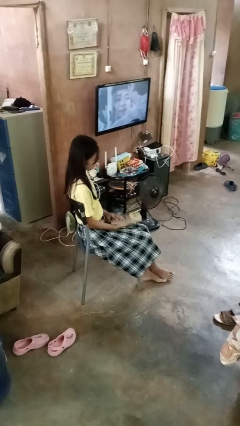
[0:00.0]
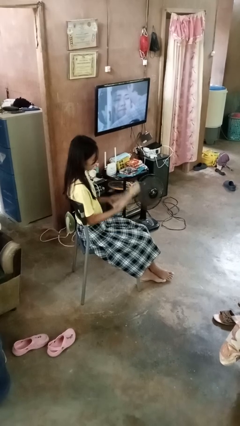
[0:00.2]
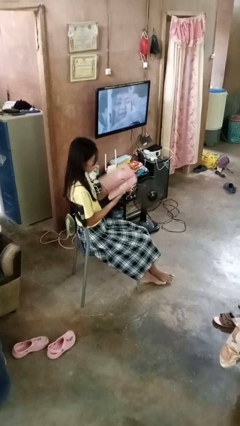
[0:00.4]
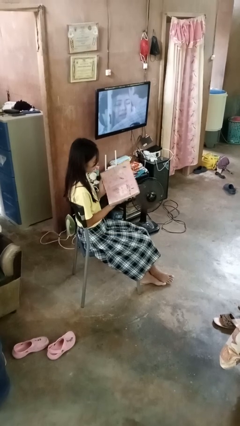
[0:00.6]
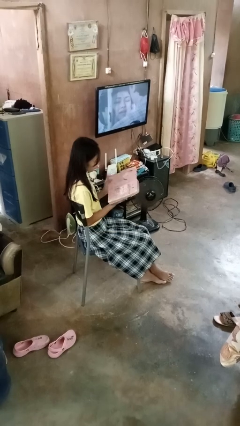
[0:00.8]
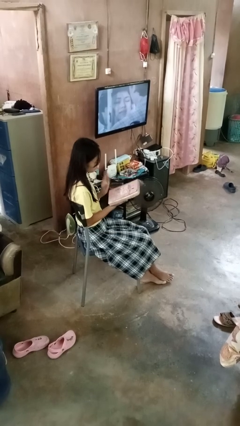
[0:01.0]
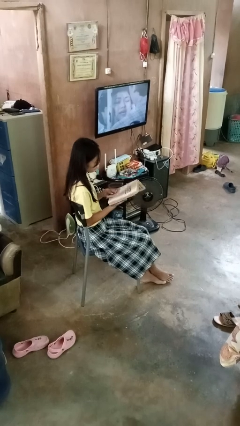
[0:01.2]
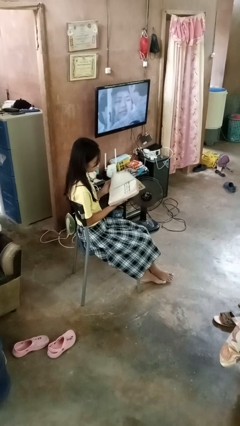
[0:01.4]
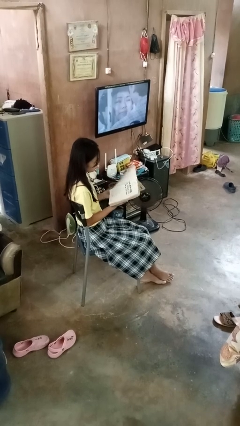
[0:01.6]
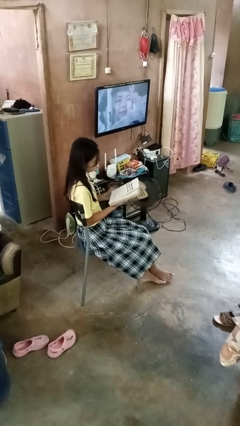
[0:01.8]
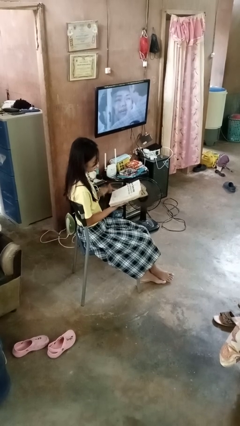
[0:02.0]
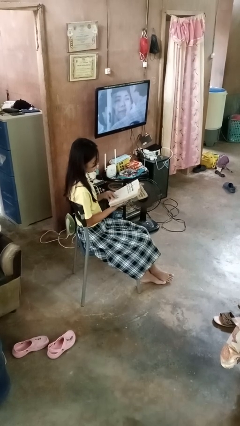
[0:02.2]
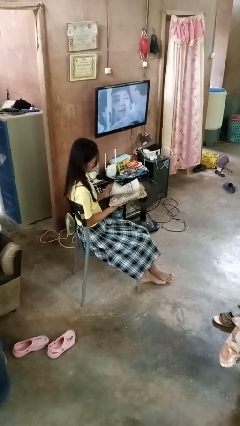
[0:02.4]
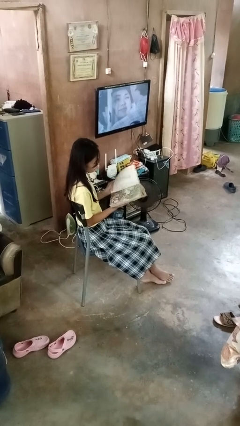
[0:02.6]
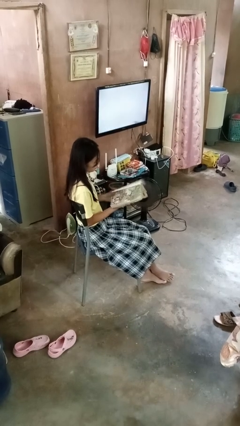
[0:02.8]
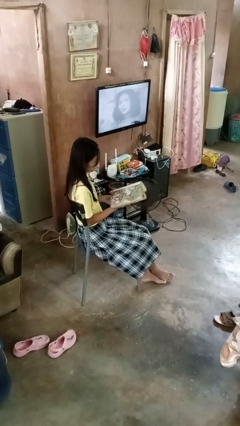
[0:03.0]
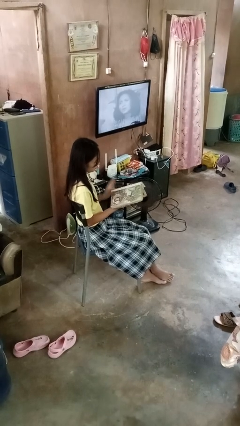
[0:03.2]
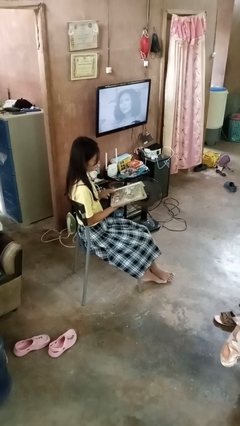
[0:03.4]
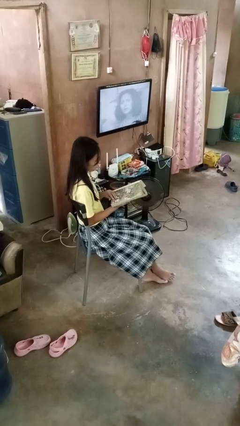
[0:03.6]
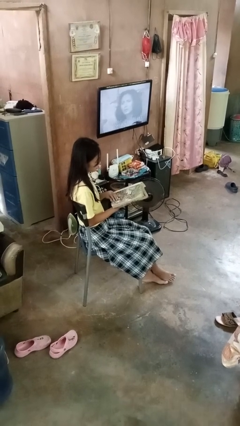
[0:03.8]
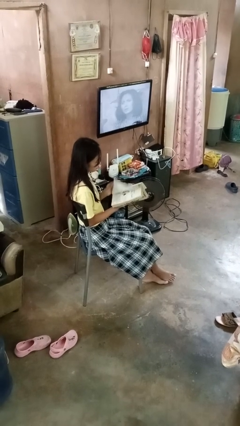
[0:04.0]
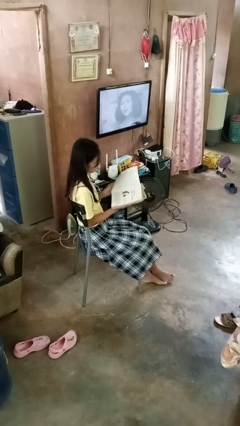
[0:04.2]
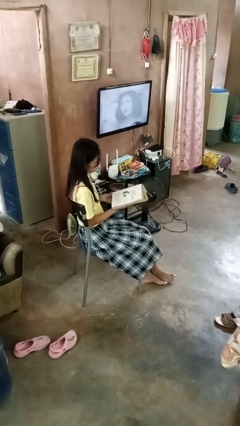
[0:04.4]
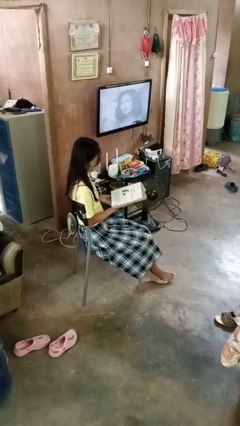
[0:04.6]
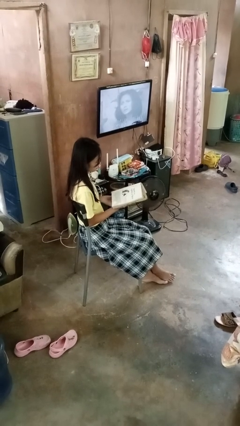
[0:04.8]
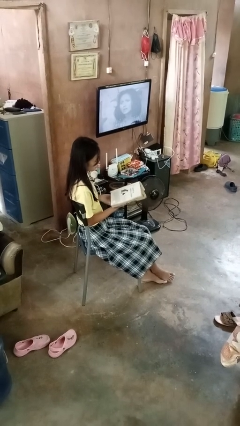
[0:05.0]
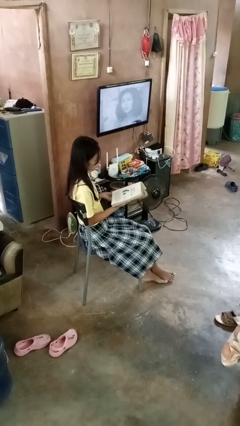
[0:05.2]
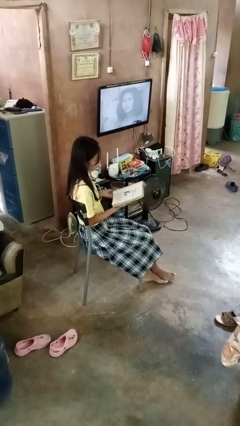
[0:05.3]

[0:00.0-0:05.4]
person reads book

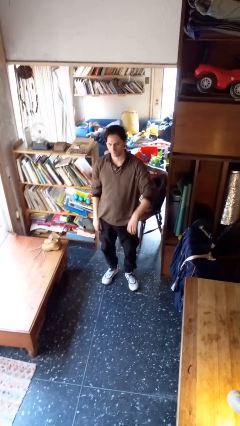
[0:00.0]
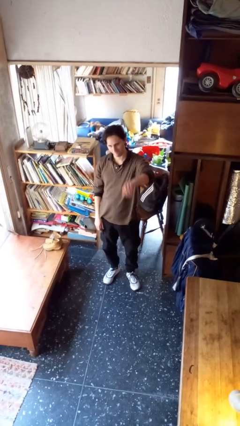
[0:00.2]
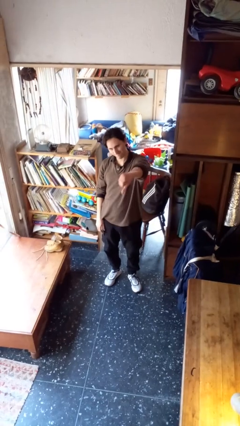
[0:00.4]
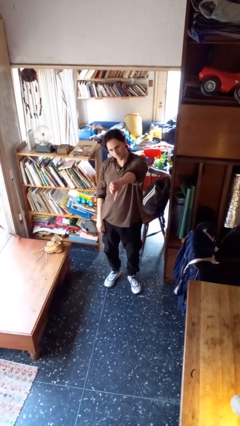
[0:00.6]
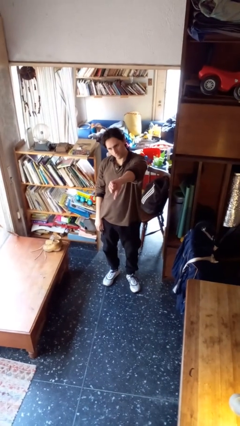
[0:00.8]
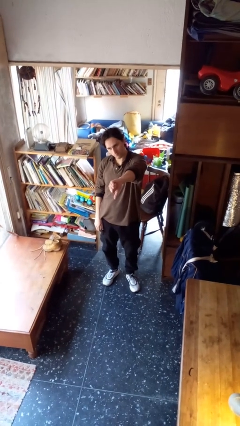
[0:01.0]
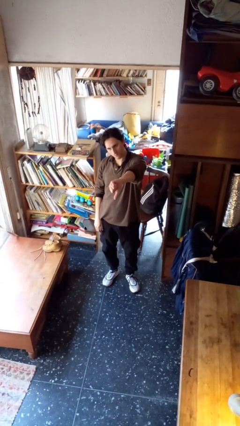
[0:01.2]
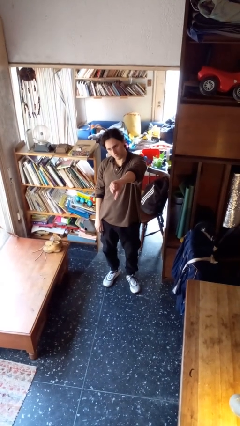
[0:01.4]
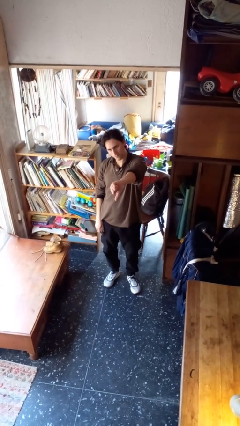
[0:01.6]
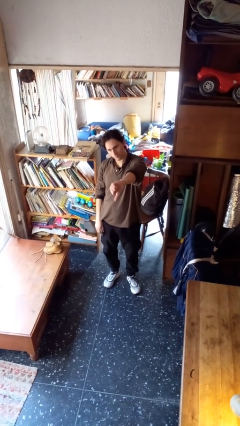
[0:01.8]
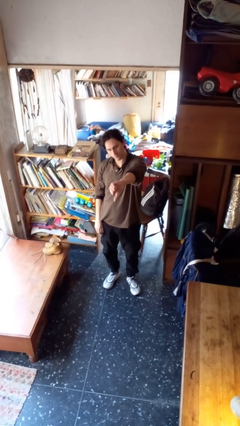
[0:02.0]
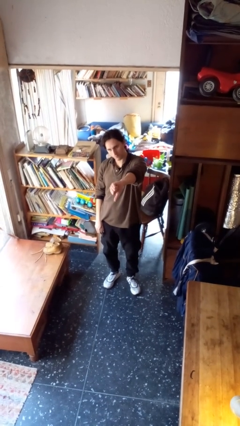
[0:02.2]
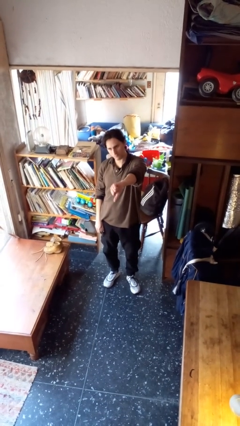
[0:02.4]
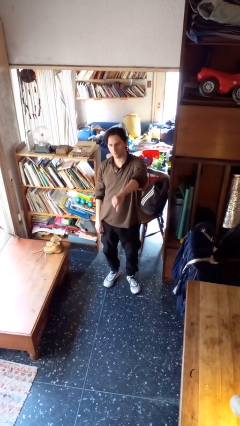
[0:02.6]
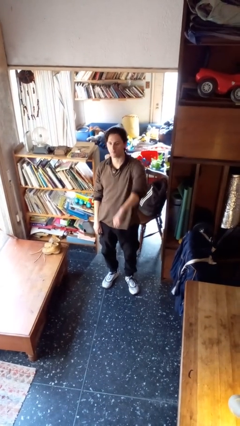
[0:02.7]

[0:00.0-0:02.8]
person gestures thumbs down

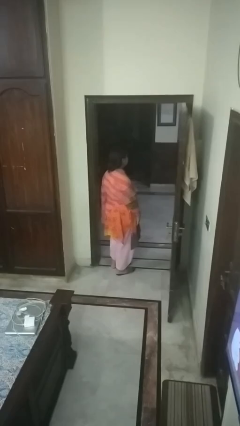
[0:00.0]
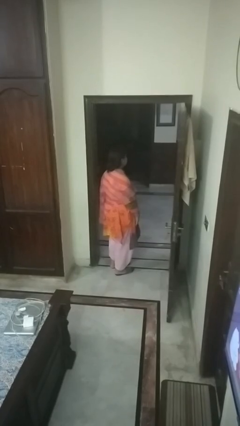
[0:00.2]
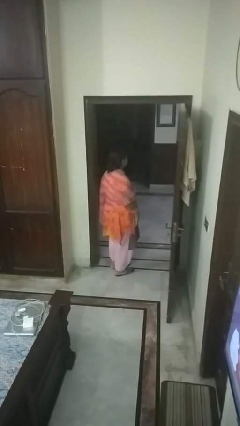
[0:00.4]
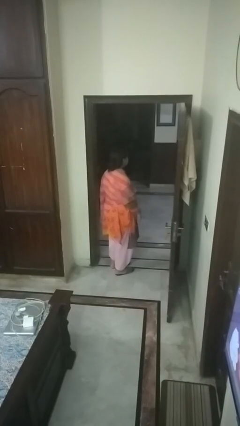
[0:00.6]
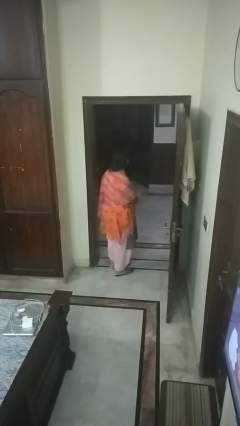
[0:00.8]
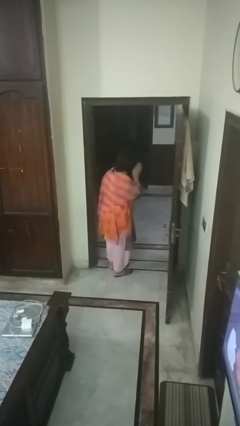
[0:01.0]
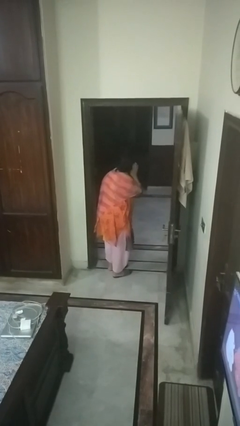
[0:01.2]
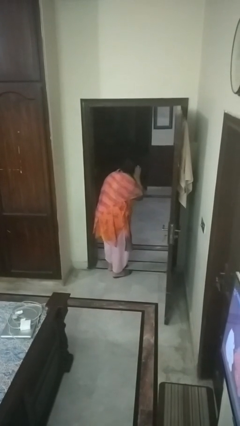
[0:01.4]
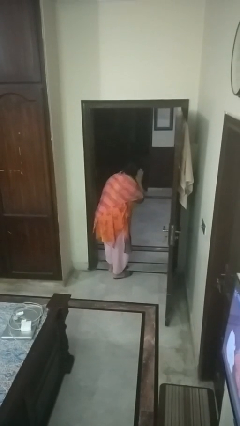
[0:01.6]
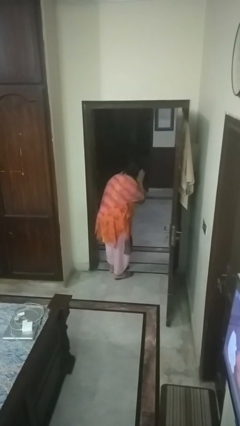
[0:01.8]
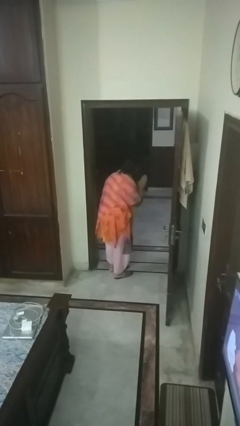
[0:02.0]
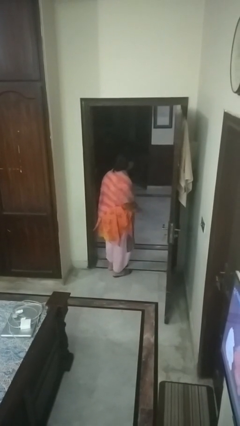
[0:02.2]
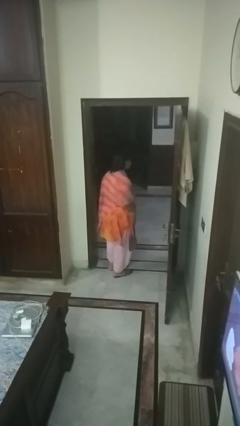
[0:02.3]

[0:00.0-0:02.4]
person gestures listen closely

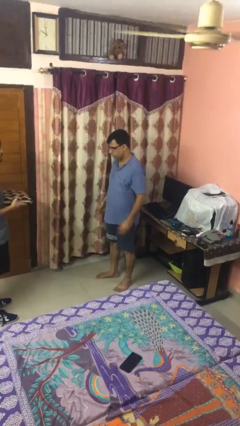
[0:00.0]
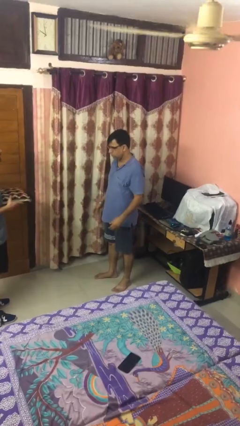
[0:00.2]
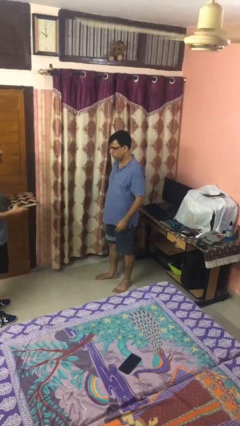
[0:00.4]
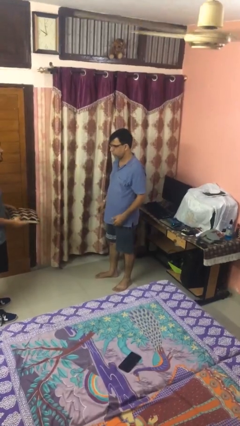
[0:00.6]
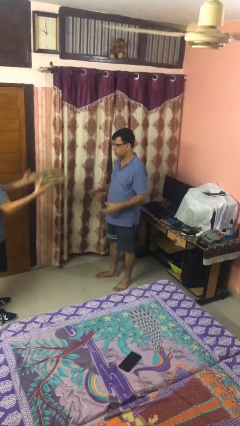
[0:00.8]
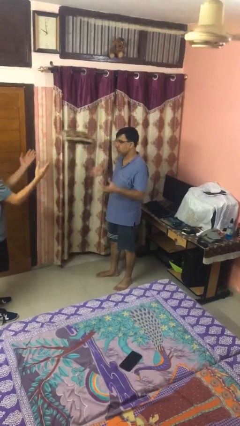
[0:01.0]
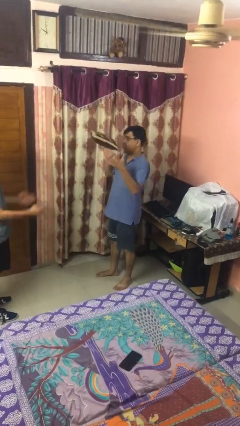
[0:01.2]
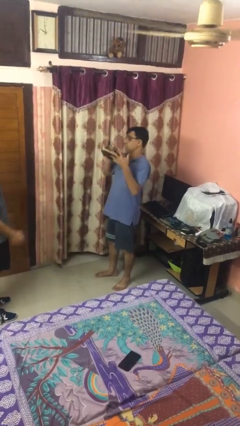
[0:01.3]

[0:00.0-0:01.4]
person catches object from person

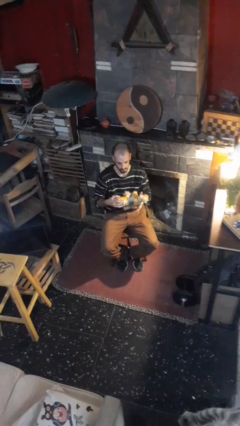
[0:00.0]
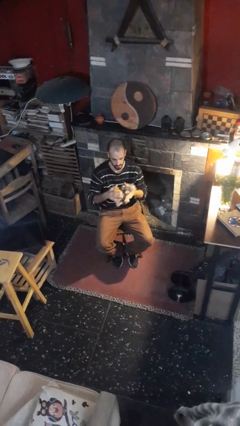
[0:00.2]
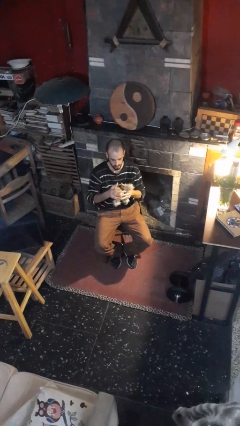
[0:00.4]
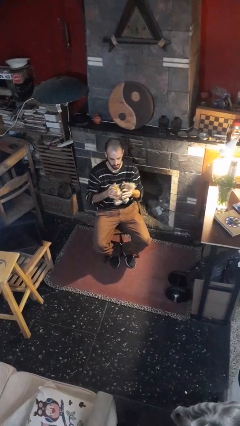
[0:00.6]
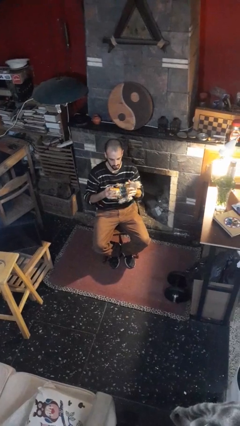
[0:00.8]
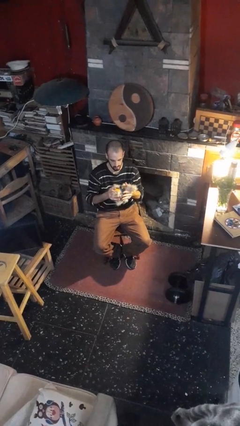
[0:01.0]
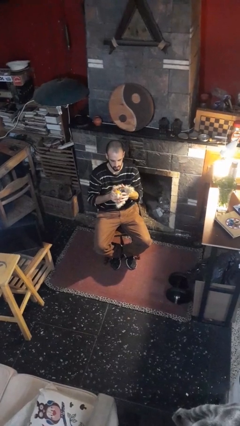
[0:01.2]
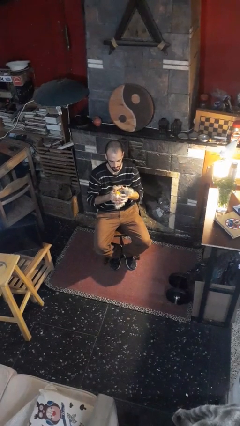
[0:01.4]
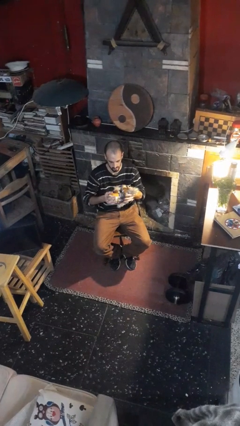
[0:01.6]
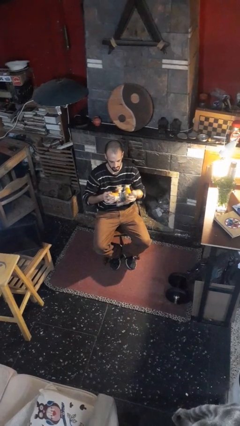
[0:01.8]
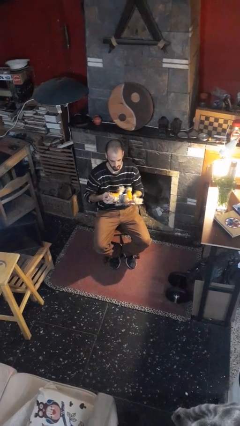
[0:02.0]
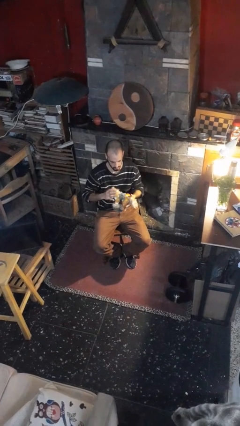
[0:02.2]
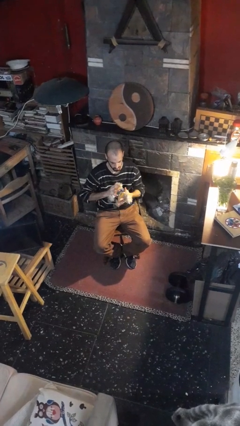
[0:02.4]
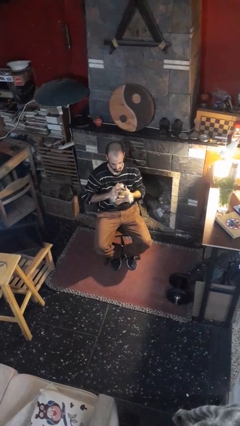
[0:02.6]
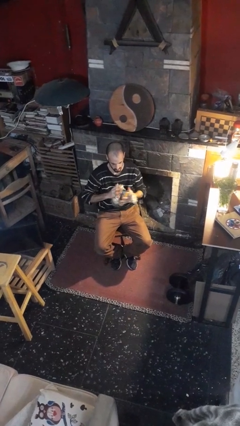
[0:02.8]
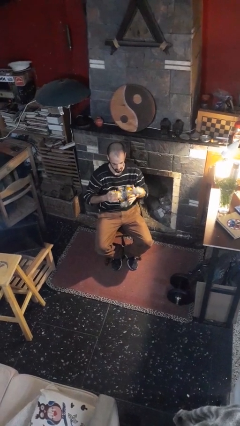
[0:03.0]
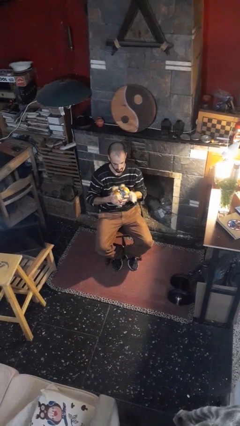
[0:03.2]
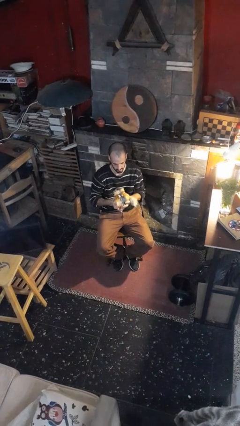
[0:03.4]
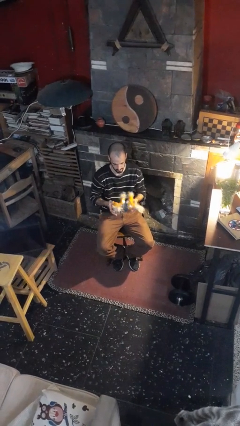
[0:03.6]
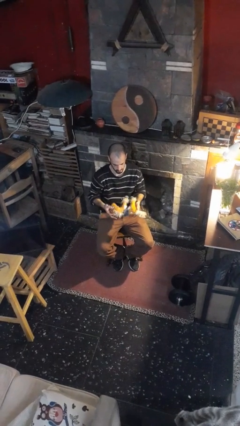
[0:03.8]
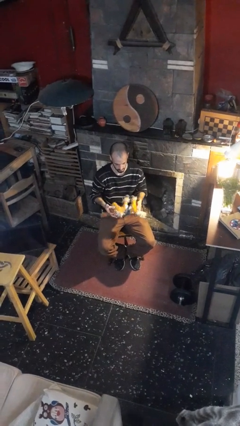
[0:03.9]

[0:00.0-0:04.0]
person squeezes object

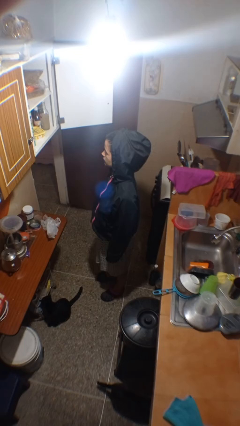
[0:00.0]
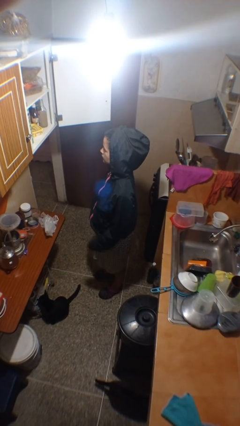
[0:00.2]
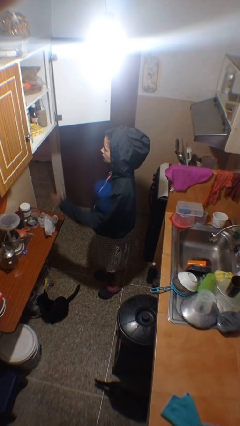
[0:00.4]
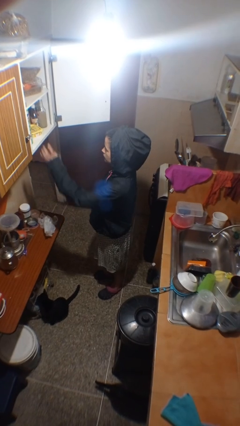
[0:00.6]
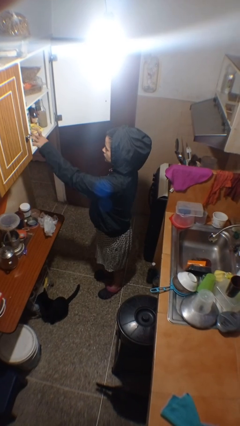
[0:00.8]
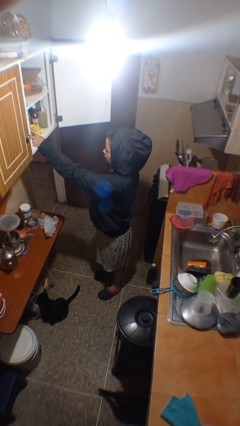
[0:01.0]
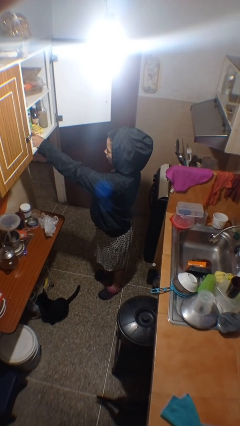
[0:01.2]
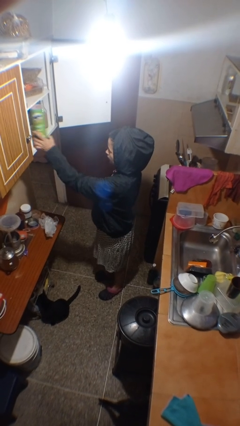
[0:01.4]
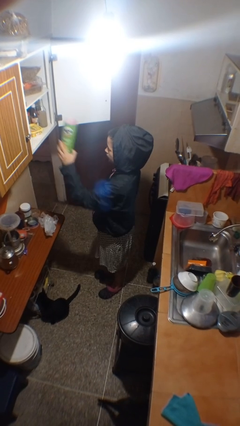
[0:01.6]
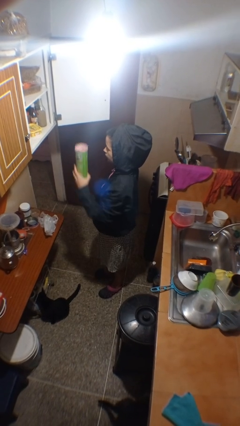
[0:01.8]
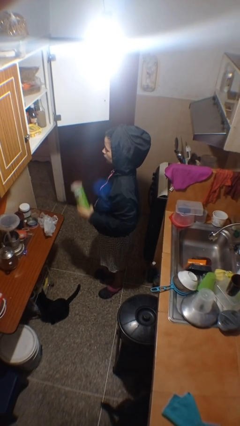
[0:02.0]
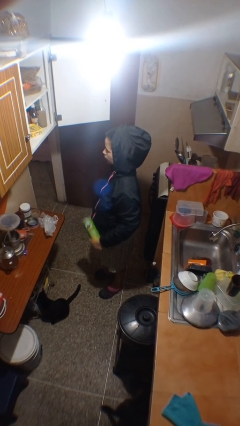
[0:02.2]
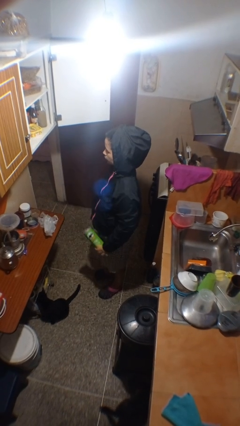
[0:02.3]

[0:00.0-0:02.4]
person takes object from cabinet
